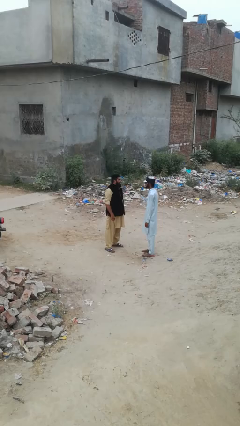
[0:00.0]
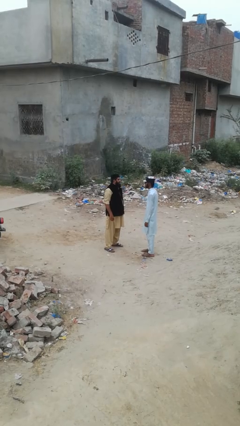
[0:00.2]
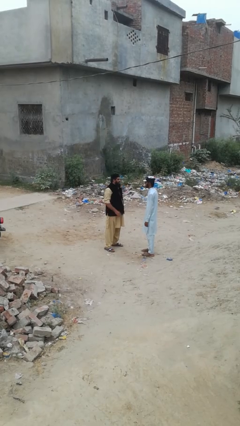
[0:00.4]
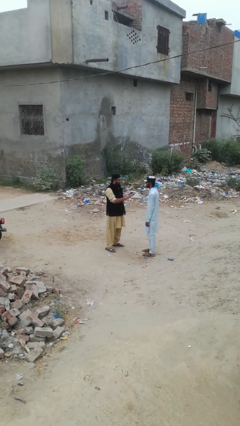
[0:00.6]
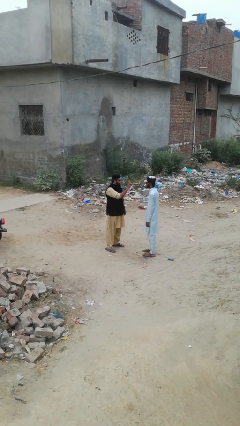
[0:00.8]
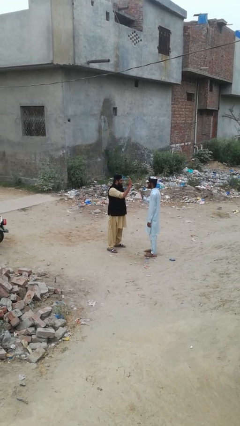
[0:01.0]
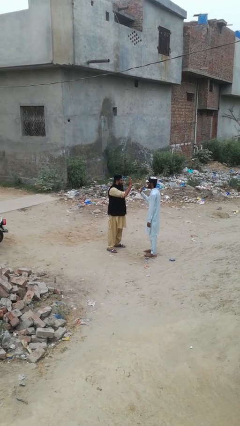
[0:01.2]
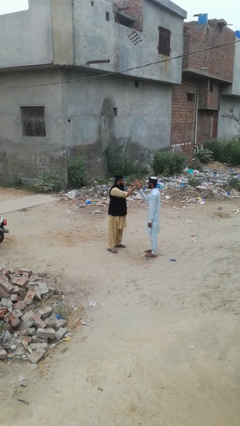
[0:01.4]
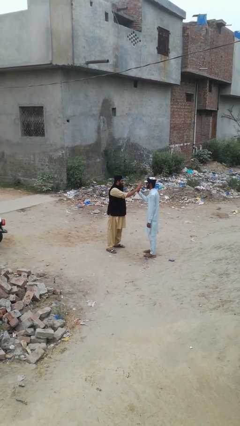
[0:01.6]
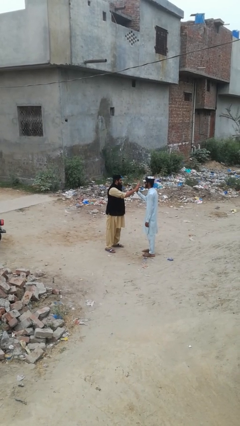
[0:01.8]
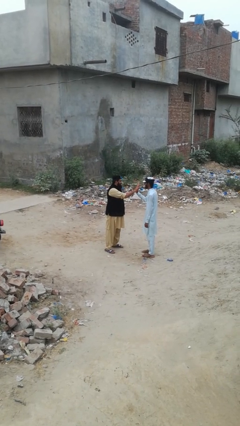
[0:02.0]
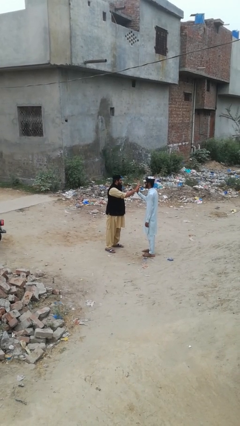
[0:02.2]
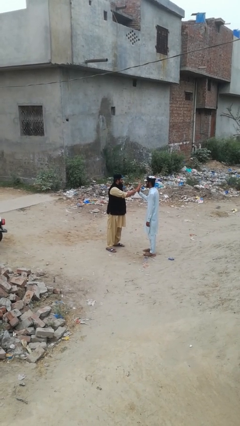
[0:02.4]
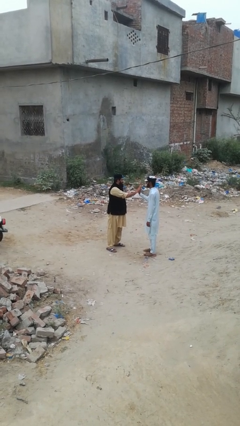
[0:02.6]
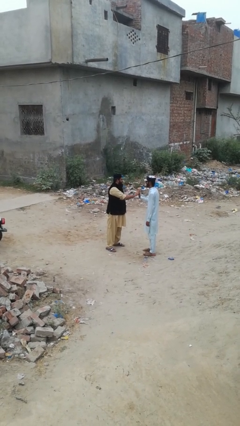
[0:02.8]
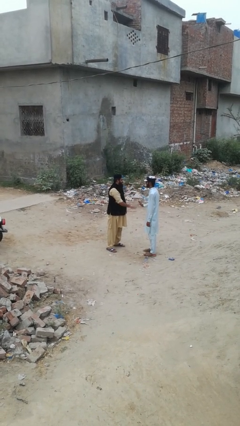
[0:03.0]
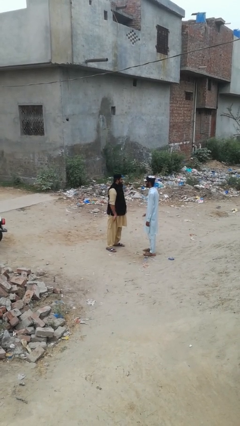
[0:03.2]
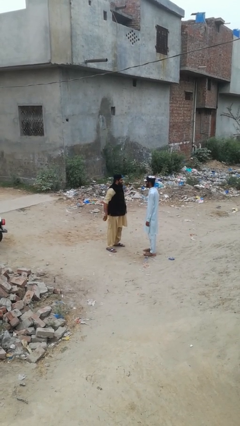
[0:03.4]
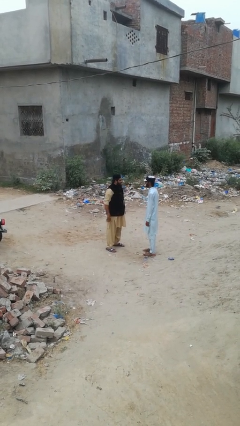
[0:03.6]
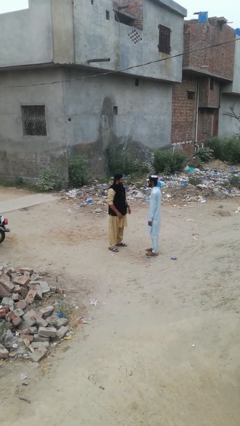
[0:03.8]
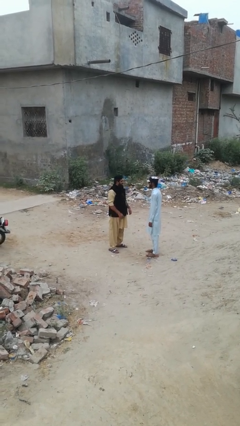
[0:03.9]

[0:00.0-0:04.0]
person highfives hand

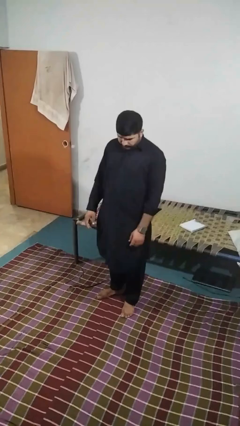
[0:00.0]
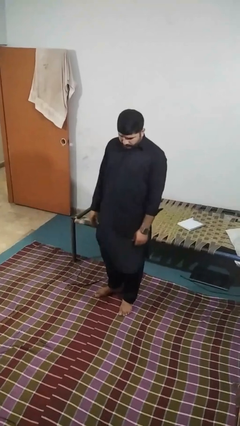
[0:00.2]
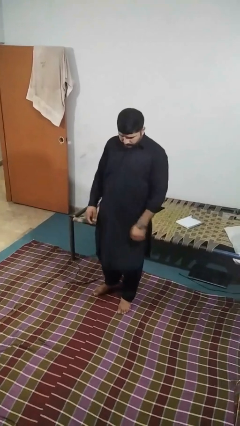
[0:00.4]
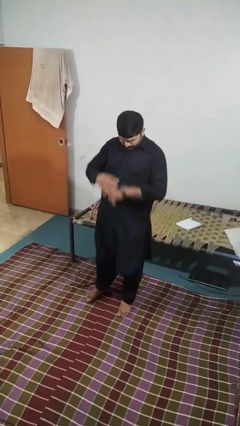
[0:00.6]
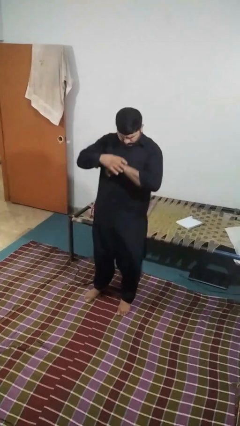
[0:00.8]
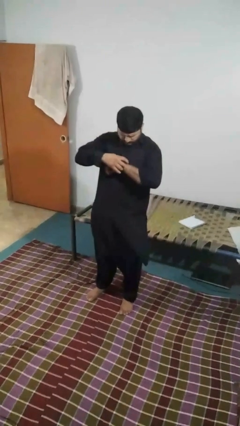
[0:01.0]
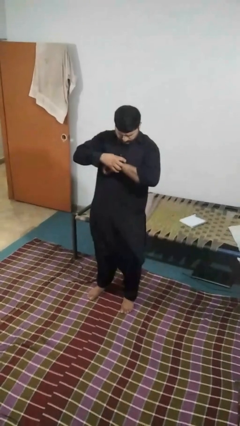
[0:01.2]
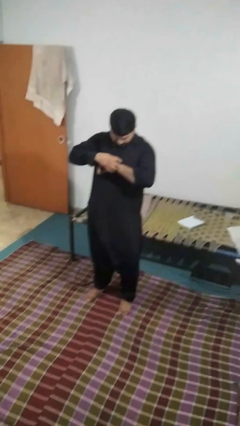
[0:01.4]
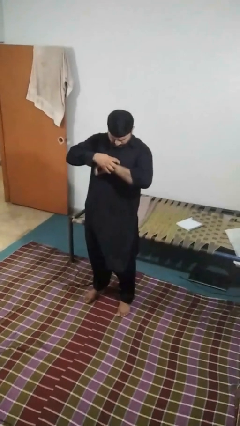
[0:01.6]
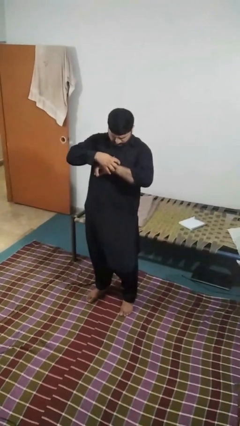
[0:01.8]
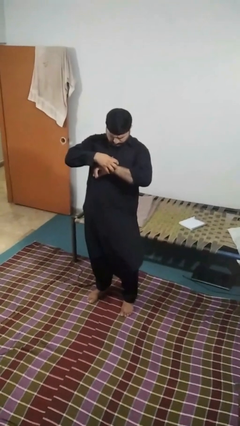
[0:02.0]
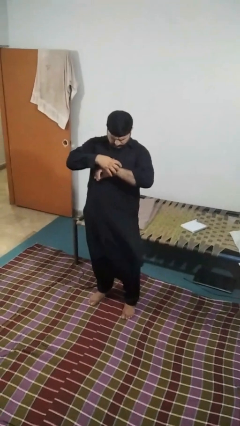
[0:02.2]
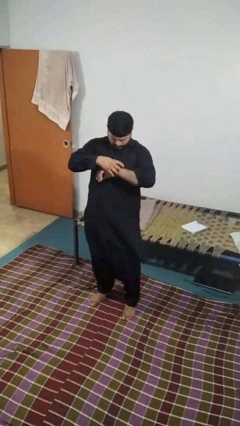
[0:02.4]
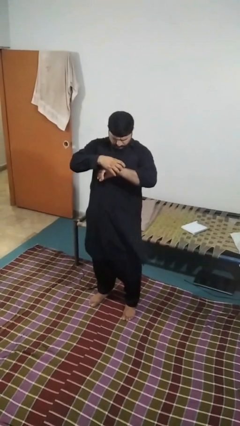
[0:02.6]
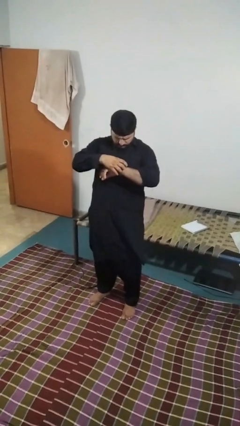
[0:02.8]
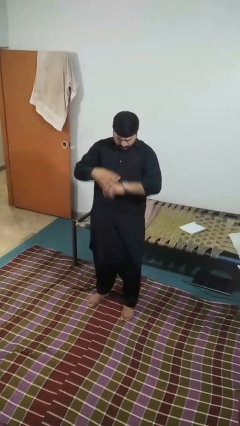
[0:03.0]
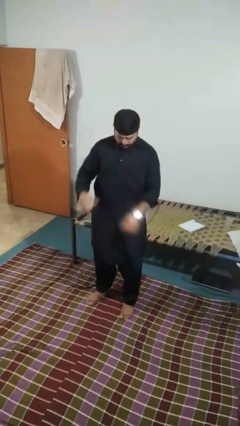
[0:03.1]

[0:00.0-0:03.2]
person looks at wristwatch

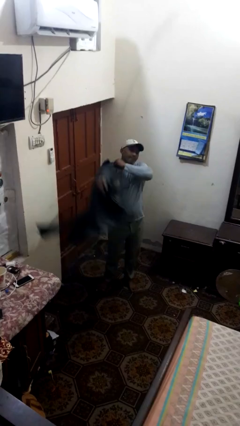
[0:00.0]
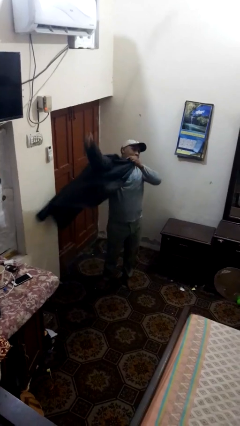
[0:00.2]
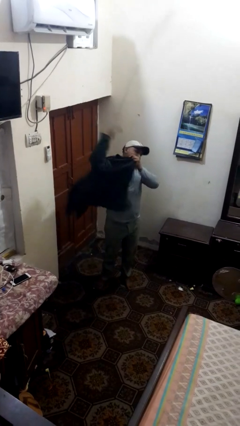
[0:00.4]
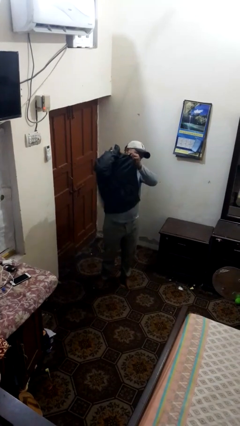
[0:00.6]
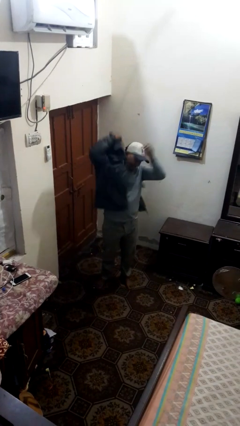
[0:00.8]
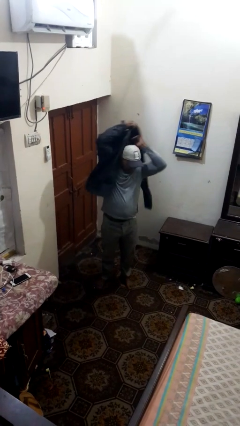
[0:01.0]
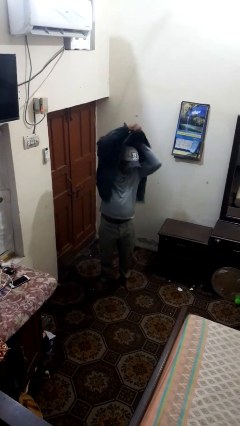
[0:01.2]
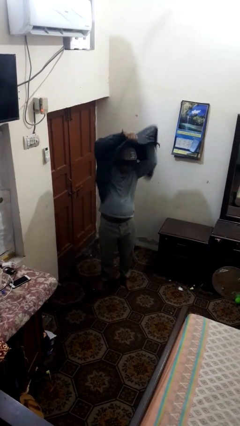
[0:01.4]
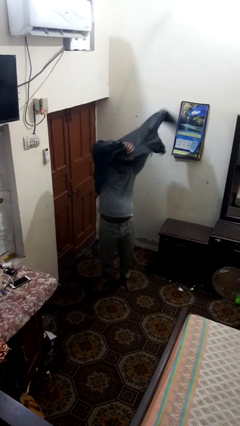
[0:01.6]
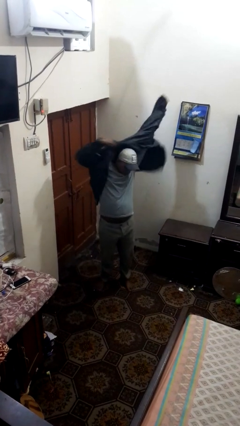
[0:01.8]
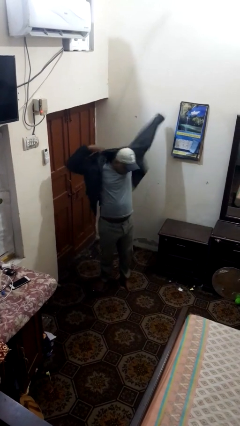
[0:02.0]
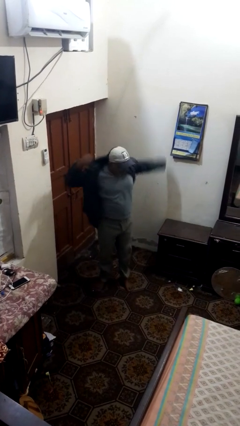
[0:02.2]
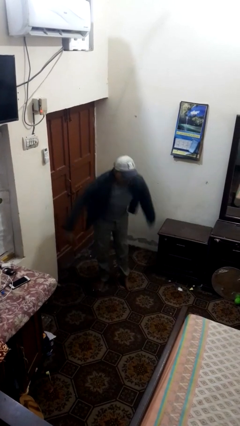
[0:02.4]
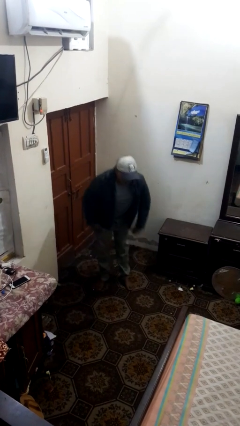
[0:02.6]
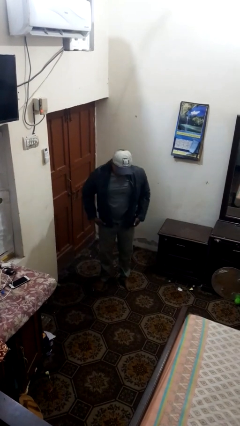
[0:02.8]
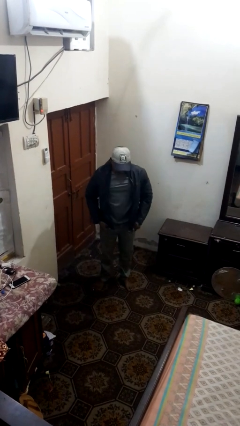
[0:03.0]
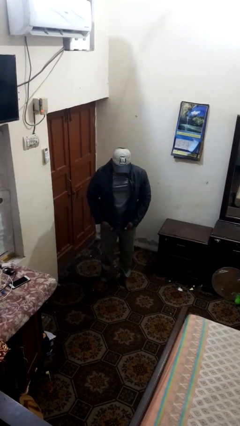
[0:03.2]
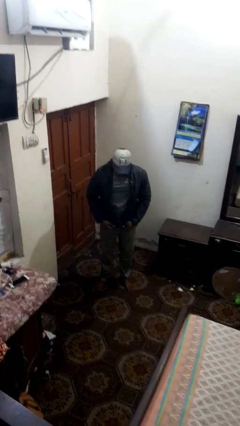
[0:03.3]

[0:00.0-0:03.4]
person puts on jacket

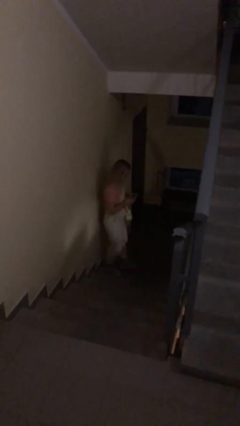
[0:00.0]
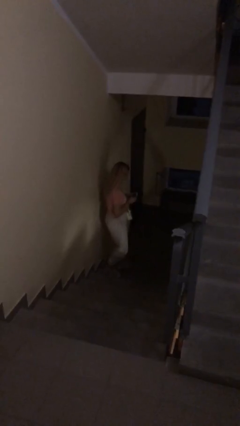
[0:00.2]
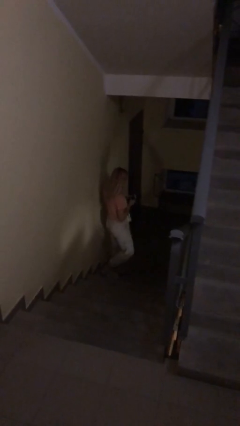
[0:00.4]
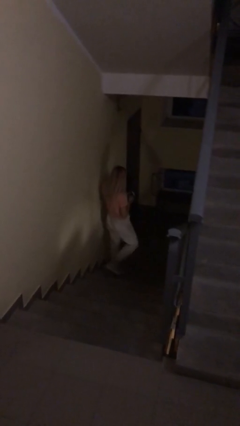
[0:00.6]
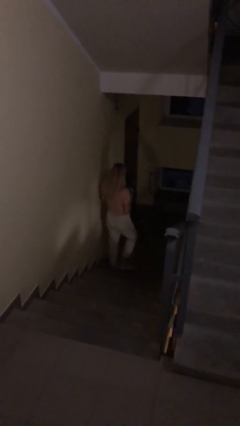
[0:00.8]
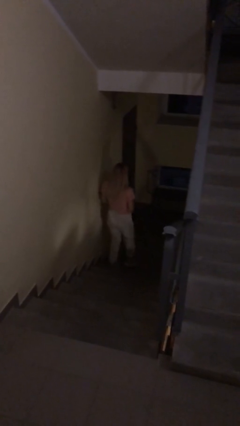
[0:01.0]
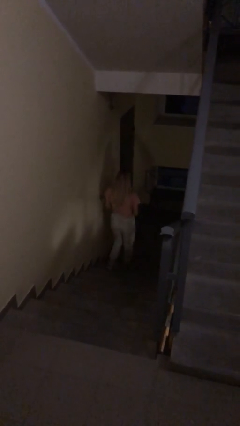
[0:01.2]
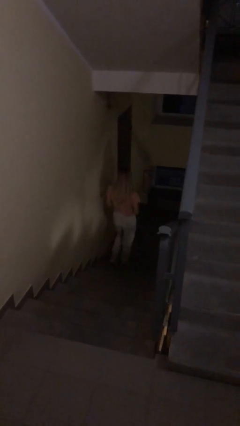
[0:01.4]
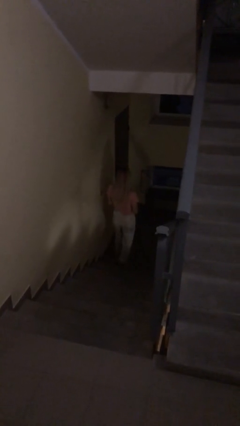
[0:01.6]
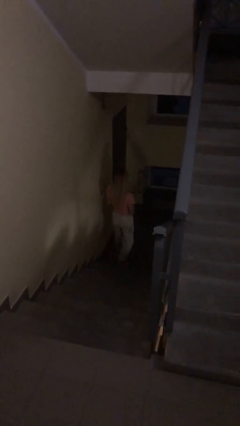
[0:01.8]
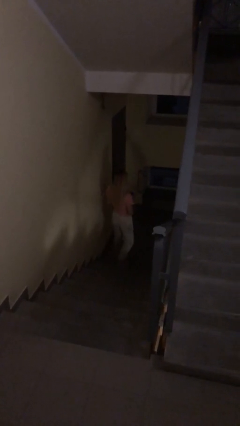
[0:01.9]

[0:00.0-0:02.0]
person climbs down stairs

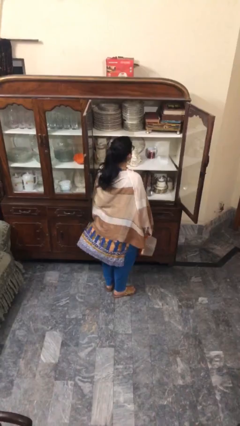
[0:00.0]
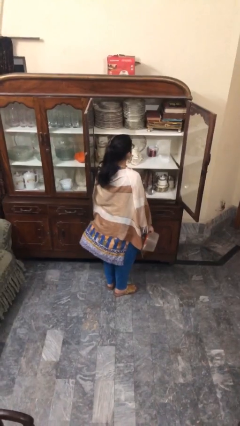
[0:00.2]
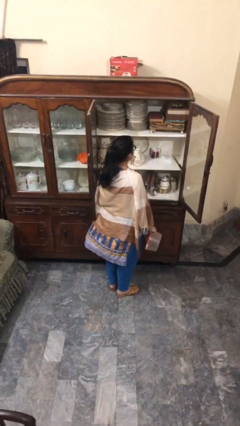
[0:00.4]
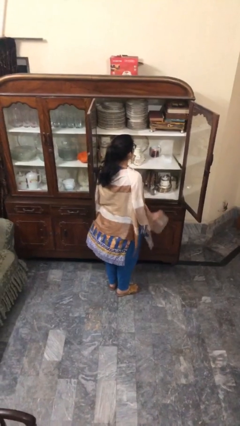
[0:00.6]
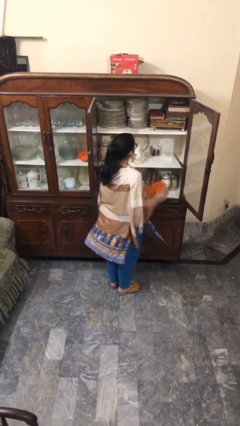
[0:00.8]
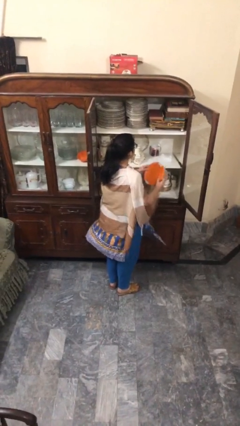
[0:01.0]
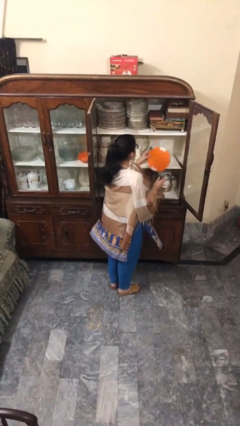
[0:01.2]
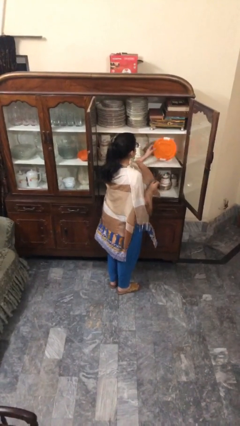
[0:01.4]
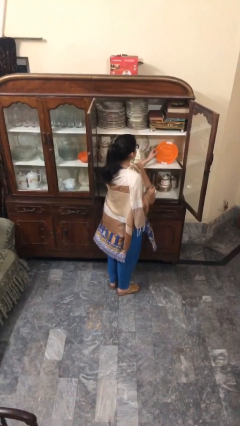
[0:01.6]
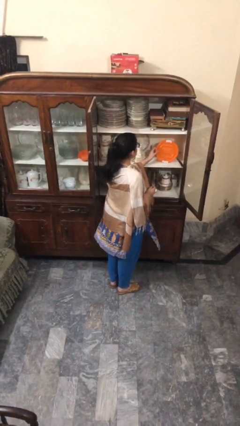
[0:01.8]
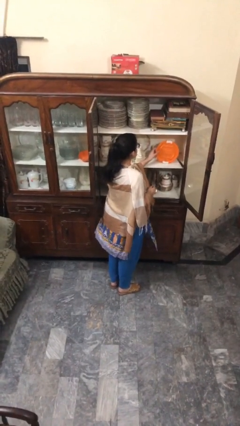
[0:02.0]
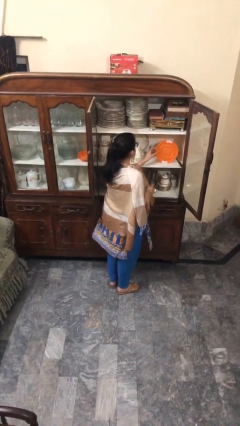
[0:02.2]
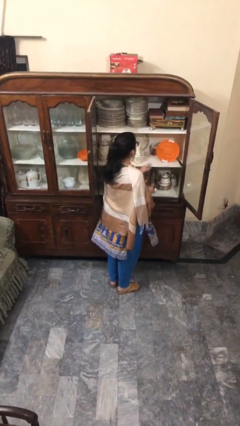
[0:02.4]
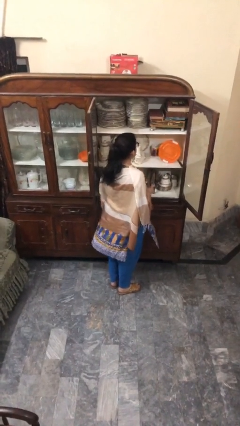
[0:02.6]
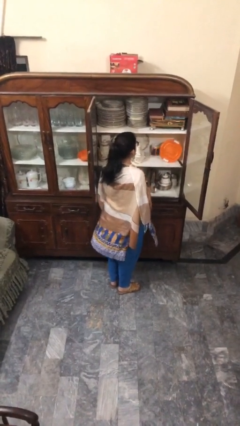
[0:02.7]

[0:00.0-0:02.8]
person puts object in cabinet

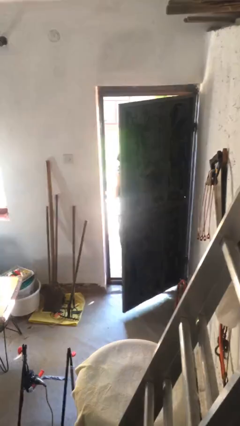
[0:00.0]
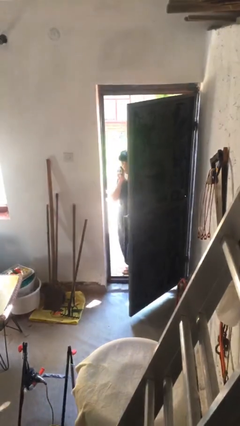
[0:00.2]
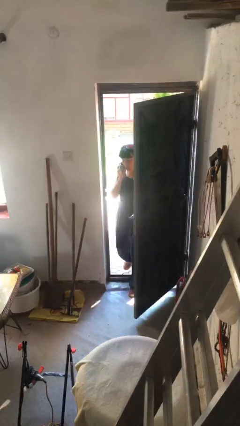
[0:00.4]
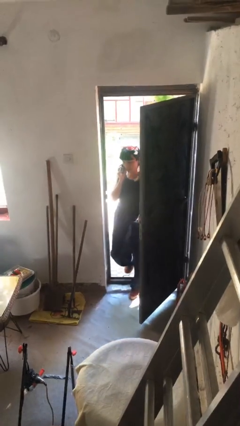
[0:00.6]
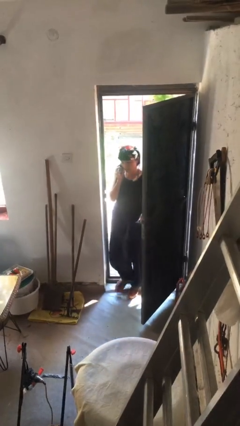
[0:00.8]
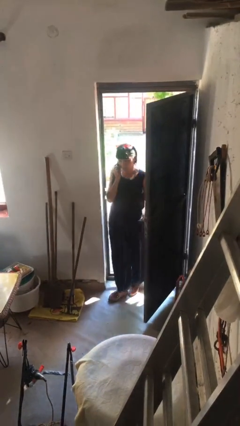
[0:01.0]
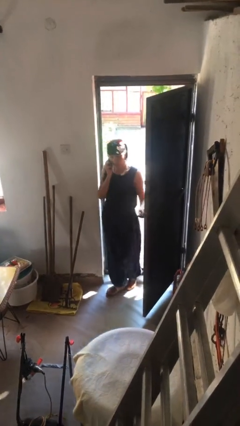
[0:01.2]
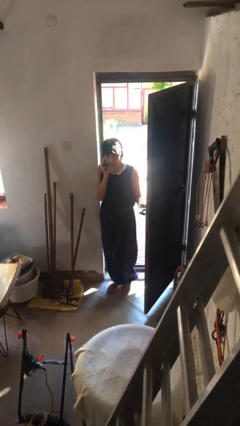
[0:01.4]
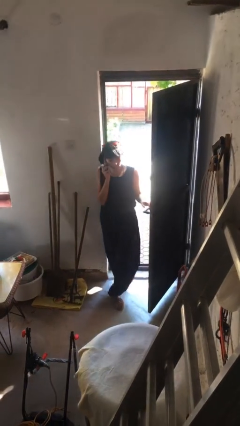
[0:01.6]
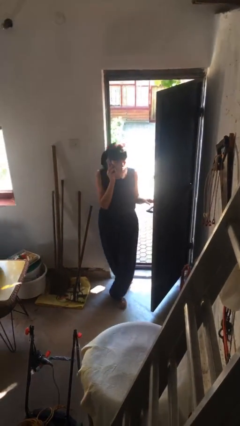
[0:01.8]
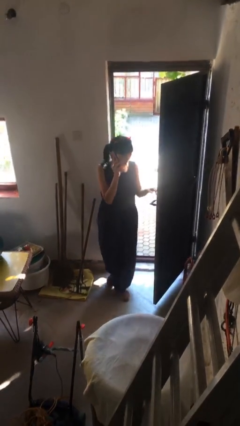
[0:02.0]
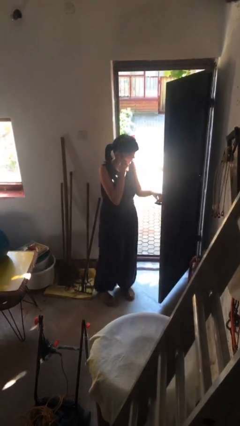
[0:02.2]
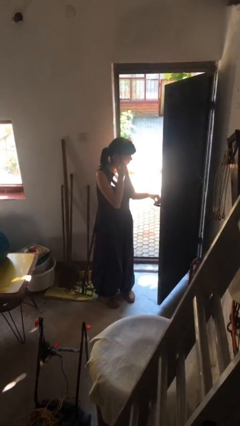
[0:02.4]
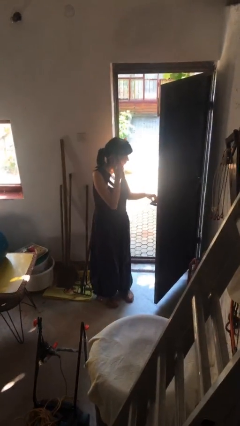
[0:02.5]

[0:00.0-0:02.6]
person enters scene through structure
